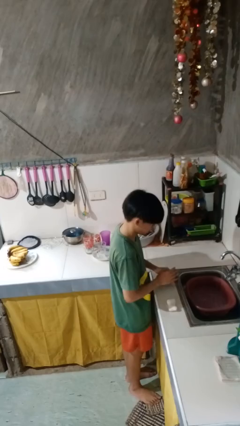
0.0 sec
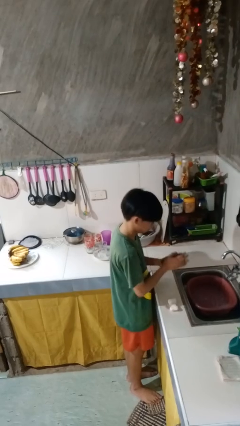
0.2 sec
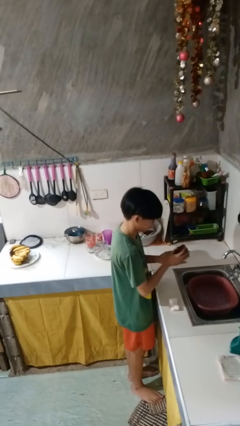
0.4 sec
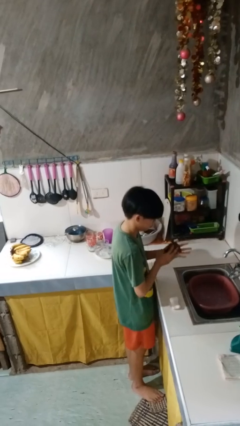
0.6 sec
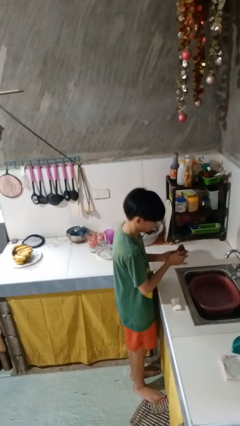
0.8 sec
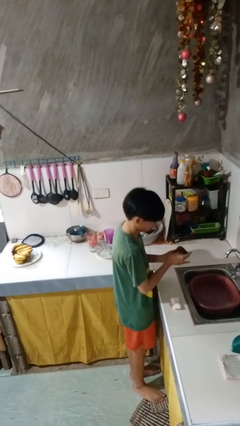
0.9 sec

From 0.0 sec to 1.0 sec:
person dries hands with towel

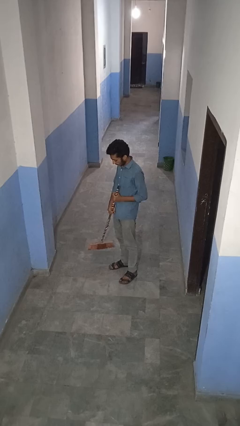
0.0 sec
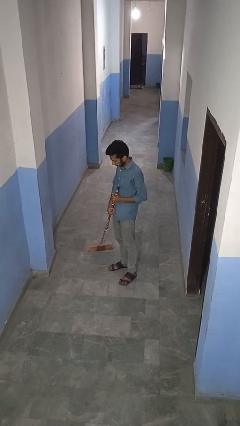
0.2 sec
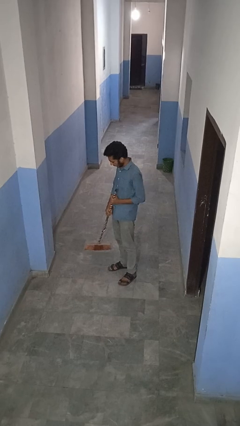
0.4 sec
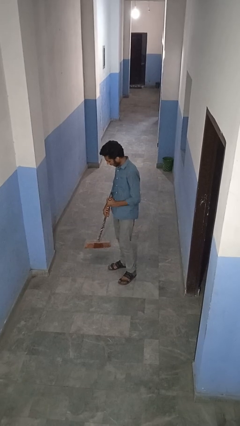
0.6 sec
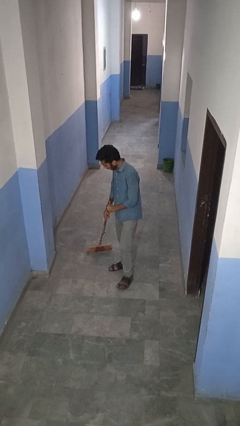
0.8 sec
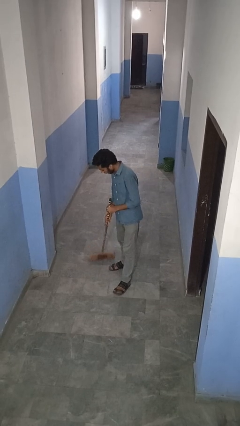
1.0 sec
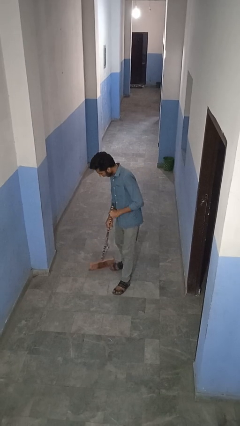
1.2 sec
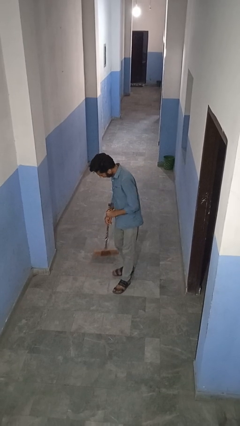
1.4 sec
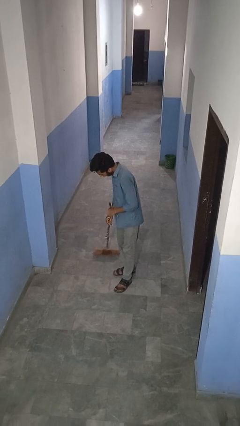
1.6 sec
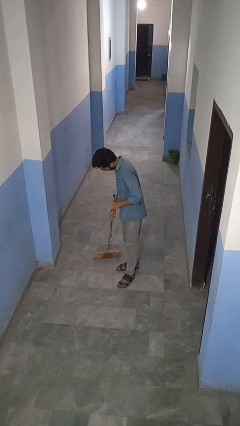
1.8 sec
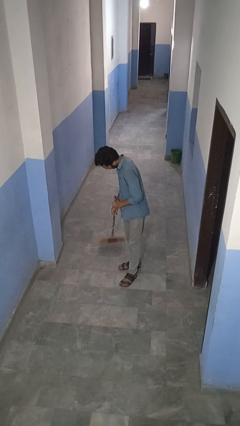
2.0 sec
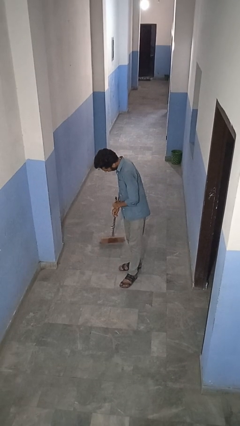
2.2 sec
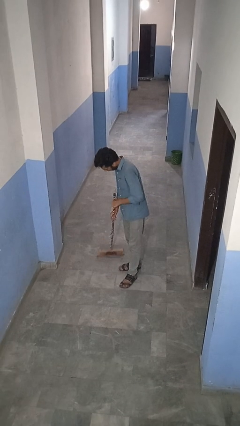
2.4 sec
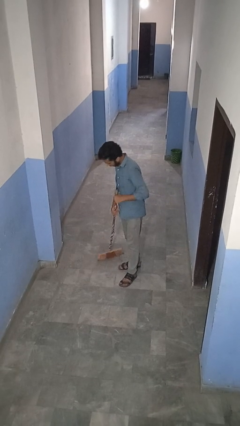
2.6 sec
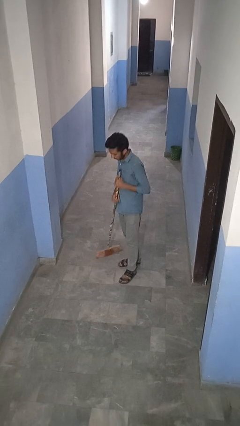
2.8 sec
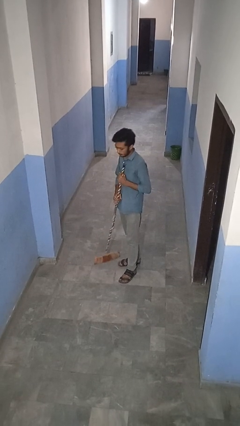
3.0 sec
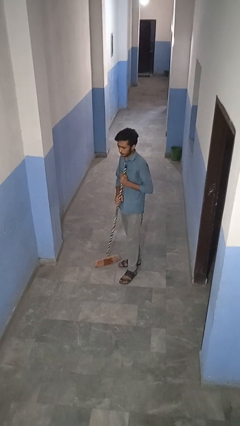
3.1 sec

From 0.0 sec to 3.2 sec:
person sweeps floor

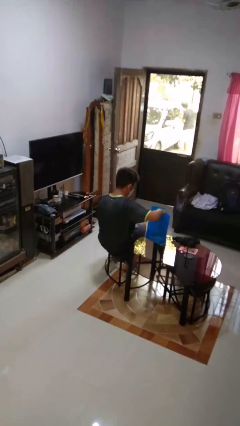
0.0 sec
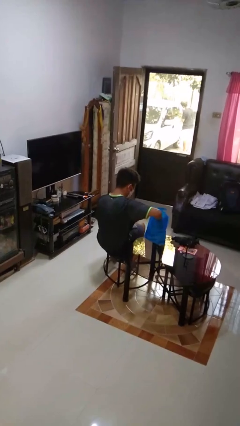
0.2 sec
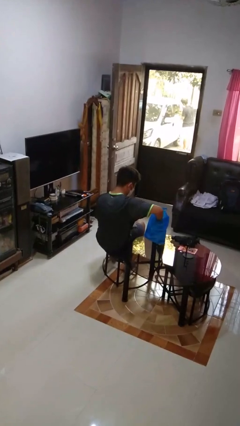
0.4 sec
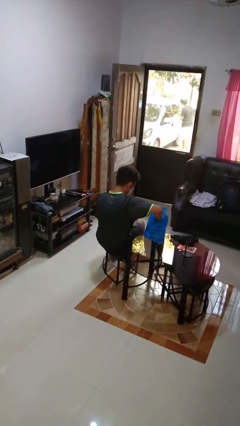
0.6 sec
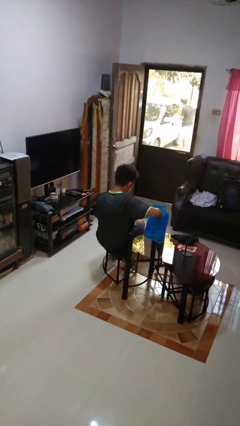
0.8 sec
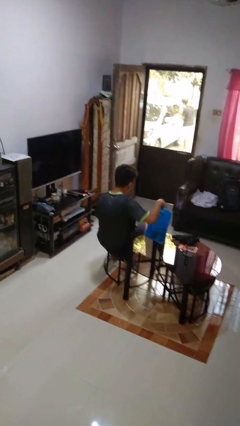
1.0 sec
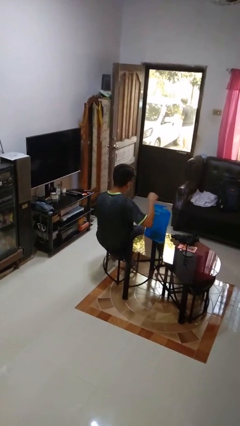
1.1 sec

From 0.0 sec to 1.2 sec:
person puts object into bag

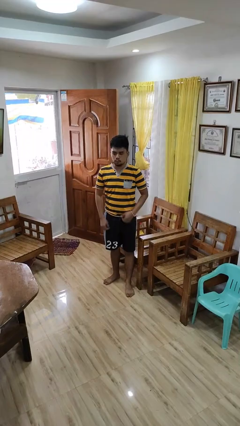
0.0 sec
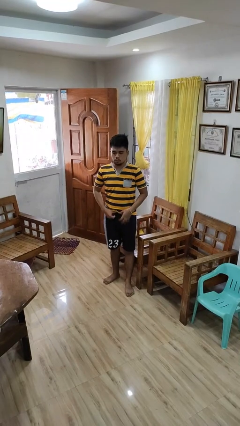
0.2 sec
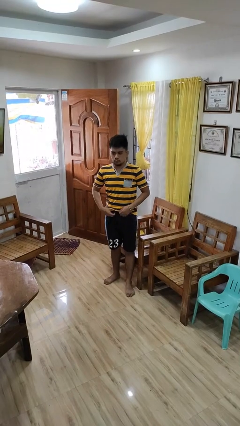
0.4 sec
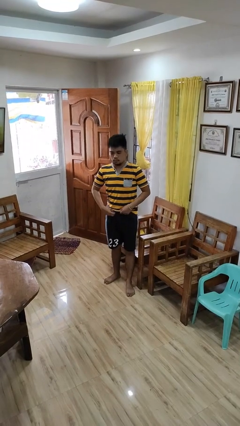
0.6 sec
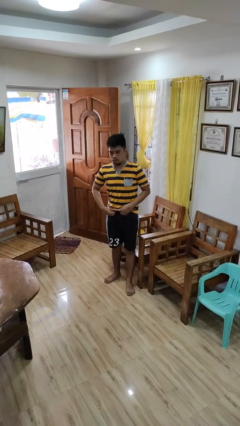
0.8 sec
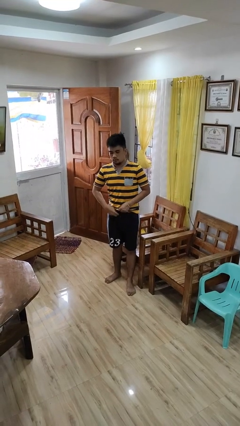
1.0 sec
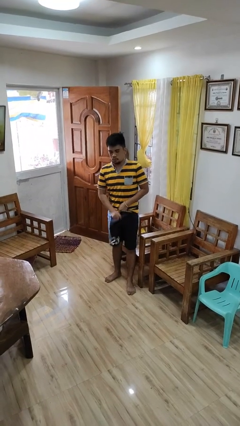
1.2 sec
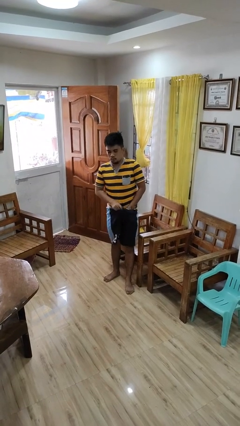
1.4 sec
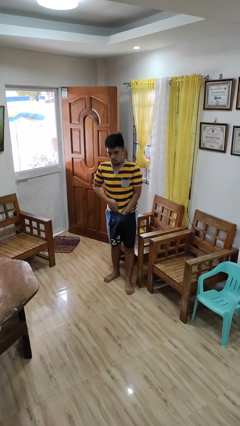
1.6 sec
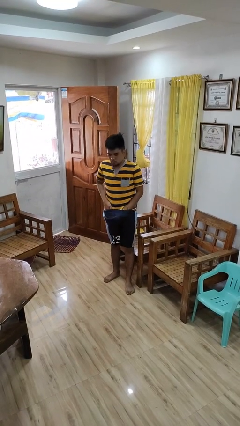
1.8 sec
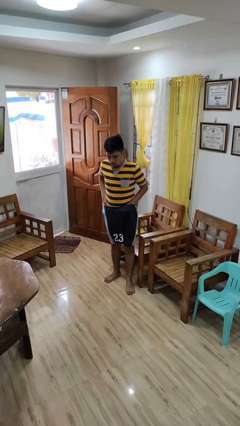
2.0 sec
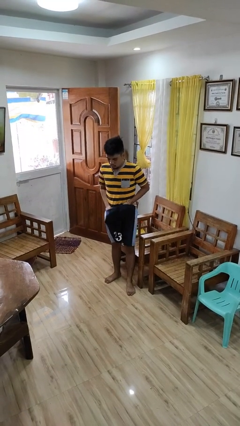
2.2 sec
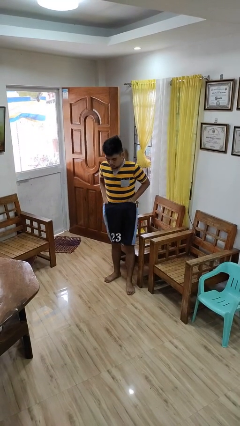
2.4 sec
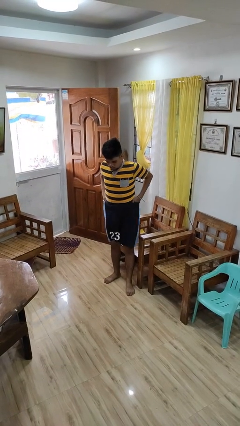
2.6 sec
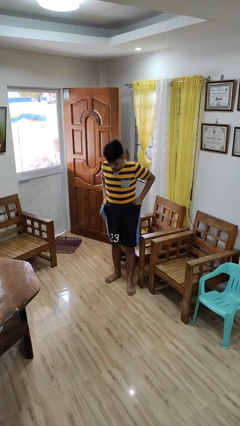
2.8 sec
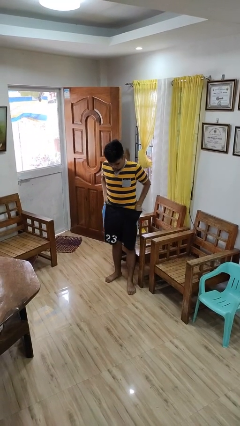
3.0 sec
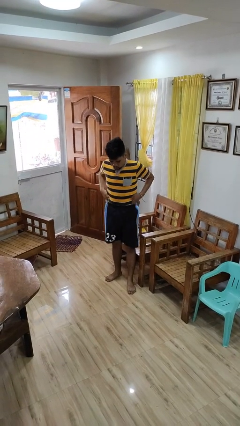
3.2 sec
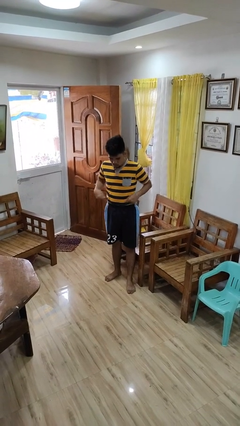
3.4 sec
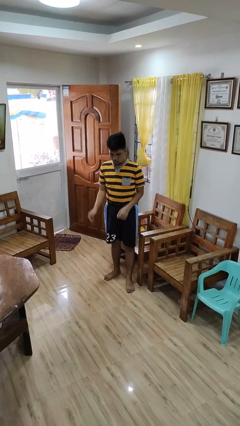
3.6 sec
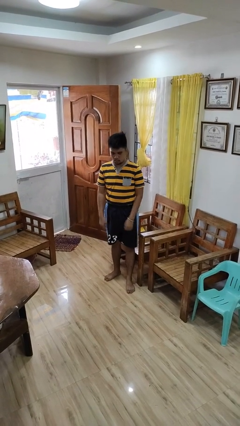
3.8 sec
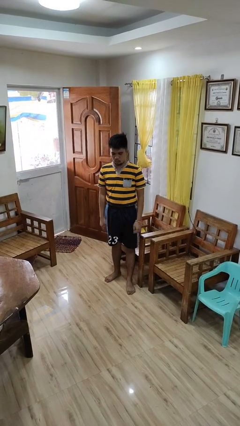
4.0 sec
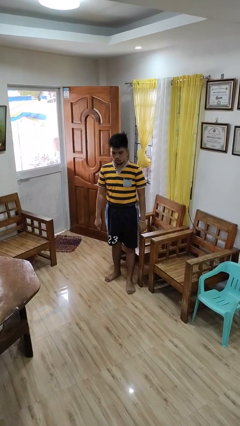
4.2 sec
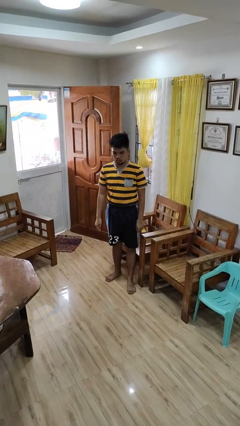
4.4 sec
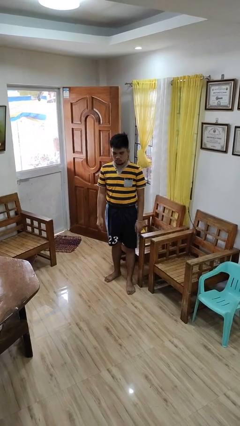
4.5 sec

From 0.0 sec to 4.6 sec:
person tucks in shirt

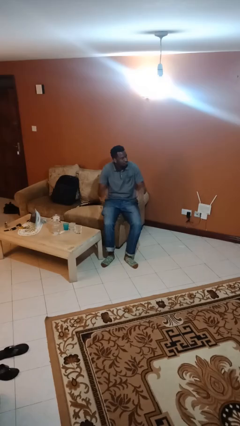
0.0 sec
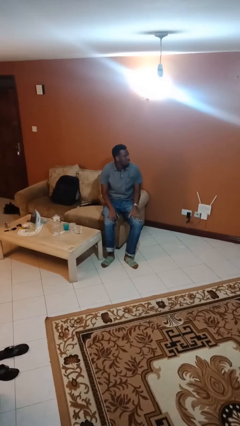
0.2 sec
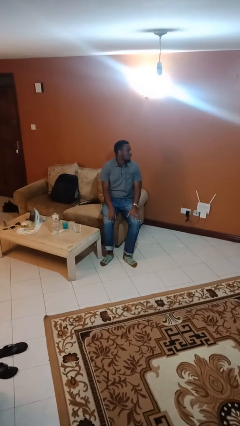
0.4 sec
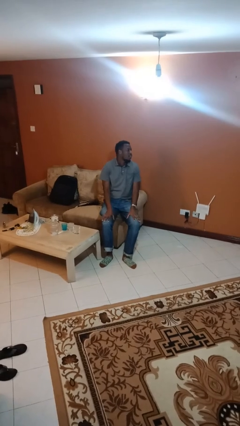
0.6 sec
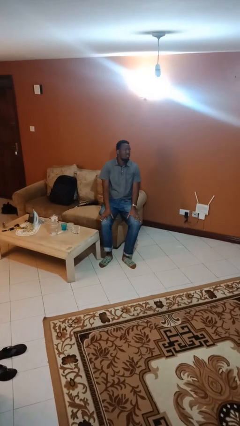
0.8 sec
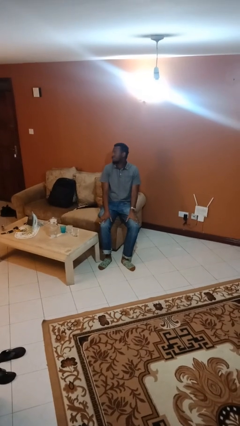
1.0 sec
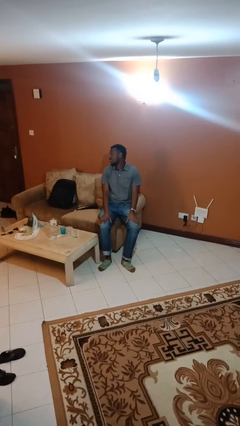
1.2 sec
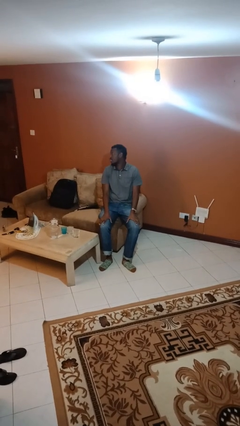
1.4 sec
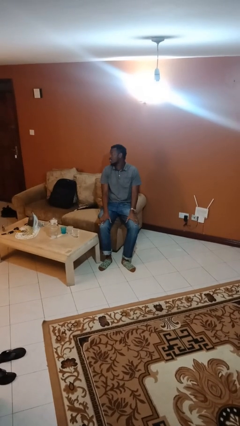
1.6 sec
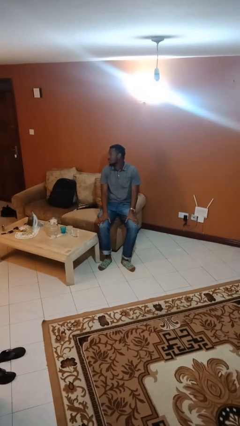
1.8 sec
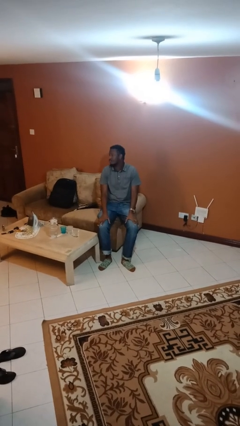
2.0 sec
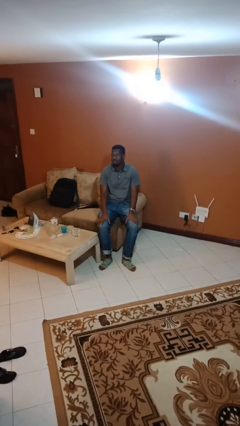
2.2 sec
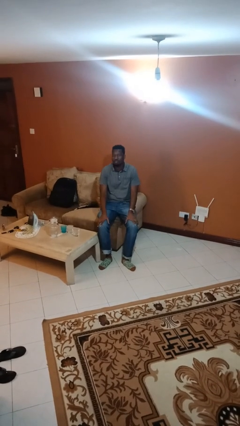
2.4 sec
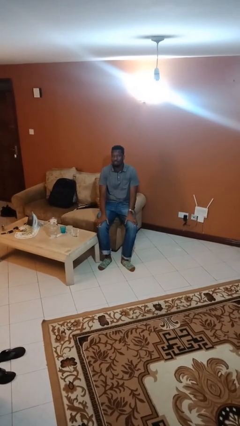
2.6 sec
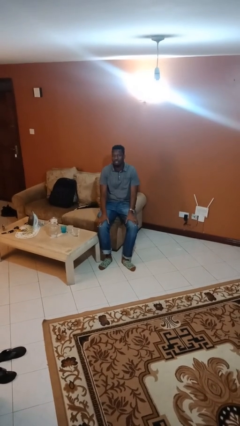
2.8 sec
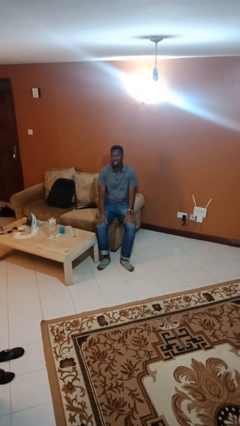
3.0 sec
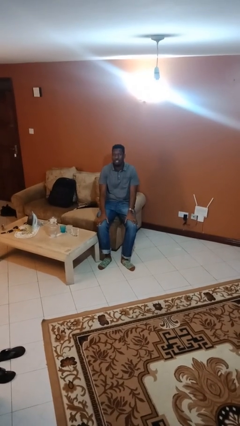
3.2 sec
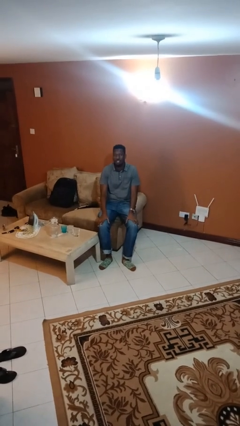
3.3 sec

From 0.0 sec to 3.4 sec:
person slaps hands on thighs

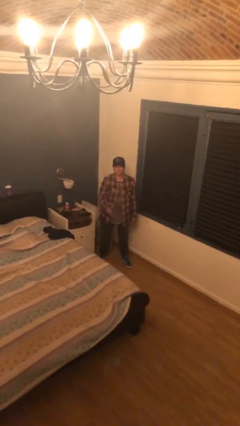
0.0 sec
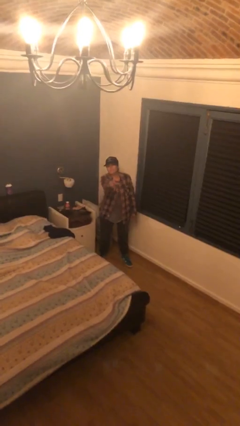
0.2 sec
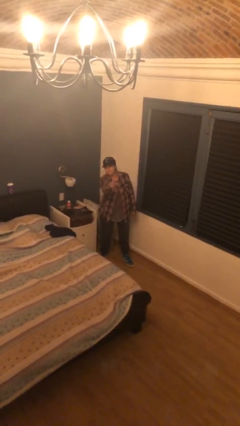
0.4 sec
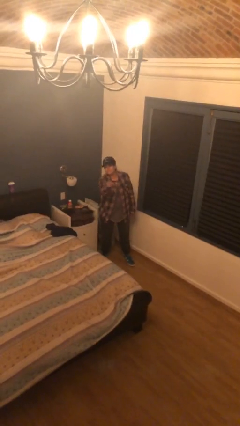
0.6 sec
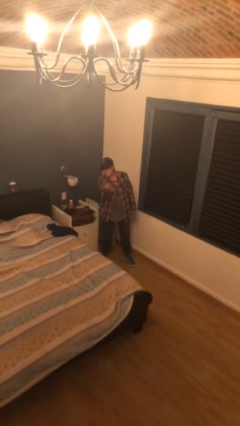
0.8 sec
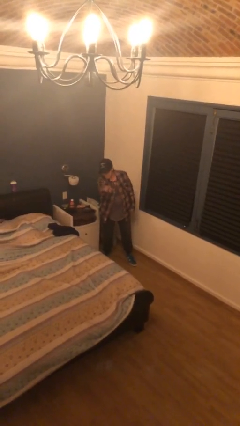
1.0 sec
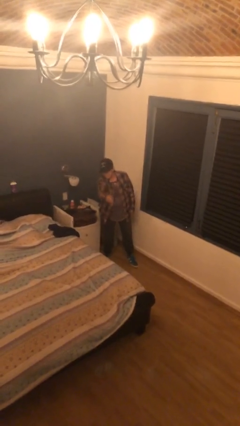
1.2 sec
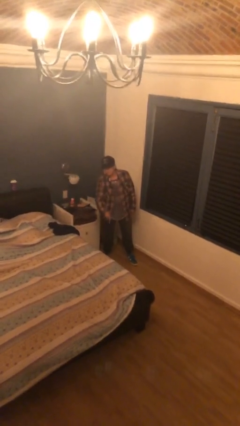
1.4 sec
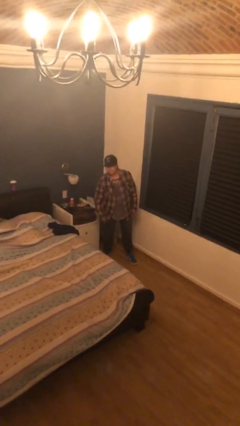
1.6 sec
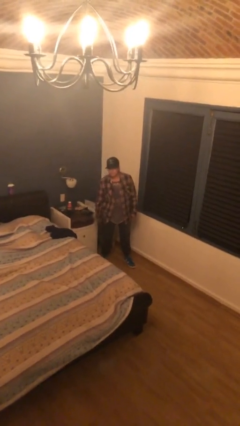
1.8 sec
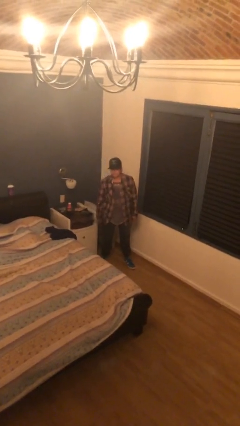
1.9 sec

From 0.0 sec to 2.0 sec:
person points at person

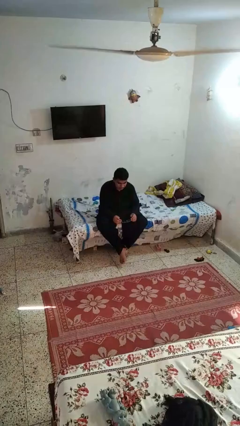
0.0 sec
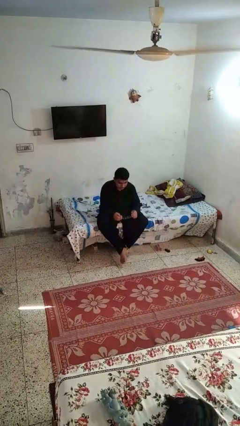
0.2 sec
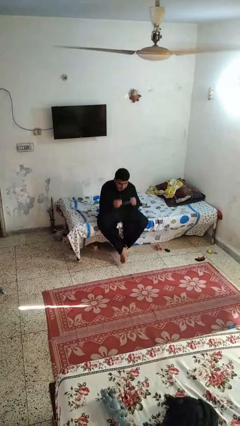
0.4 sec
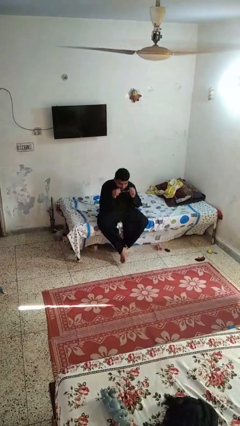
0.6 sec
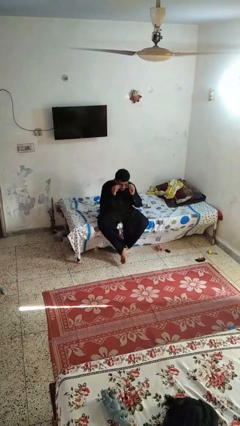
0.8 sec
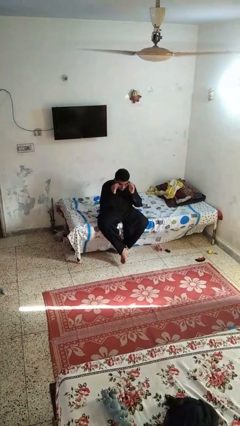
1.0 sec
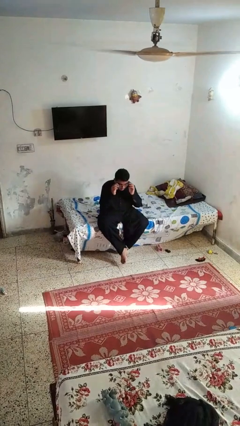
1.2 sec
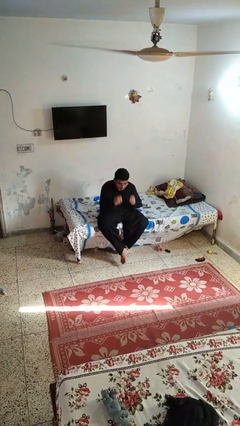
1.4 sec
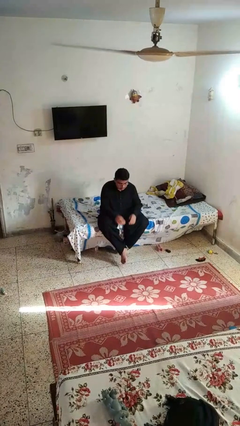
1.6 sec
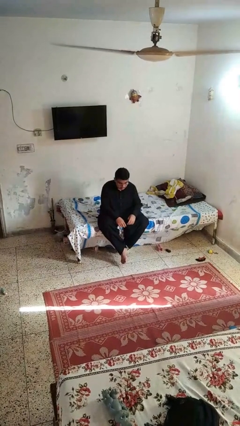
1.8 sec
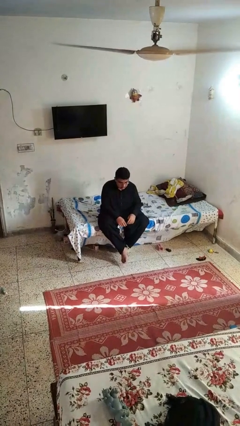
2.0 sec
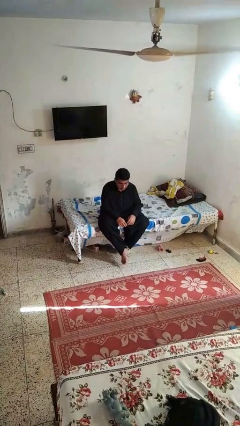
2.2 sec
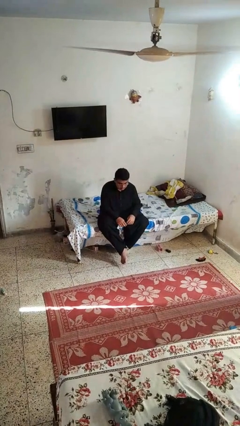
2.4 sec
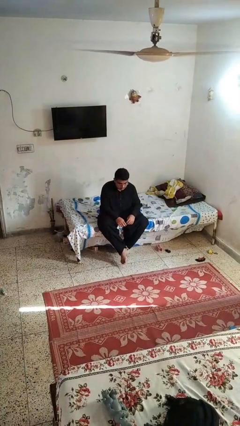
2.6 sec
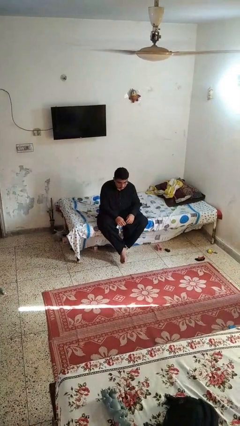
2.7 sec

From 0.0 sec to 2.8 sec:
person puts on glasses
